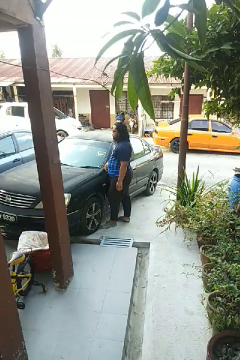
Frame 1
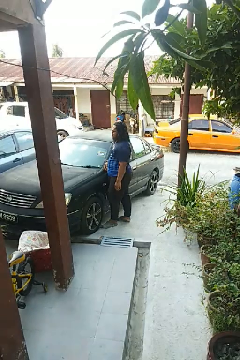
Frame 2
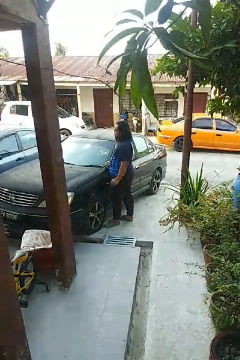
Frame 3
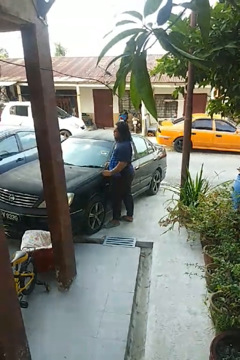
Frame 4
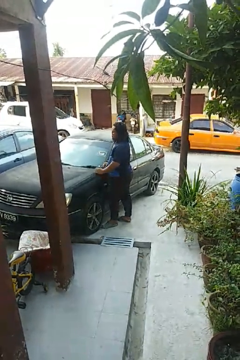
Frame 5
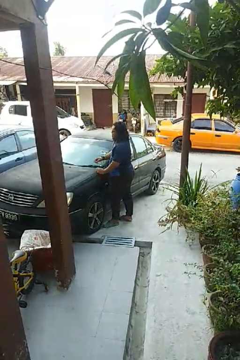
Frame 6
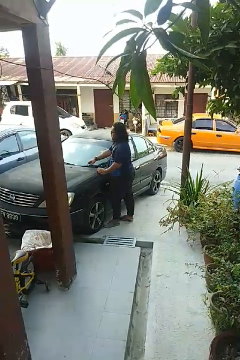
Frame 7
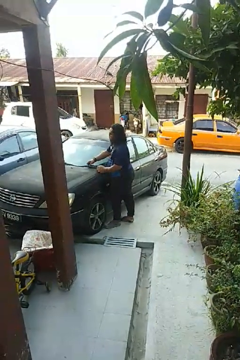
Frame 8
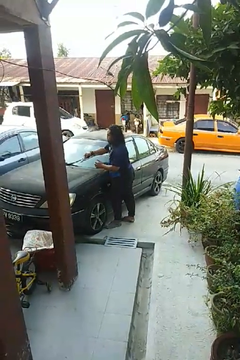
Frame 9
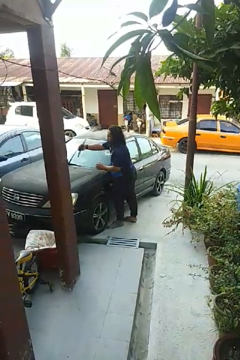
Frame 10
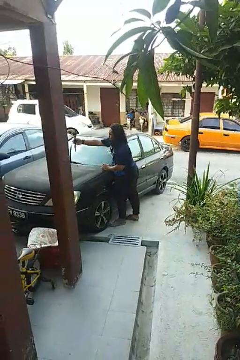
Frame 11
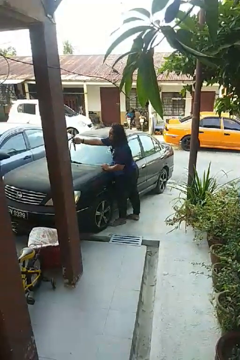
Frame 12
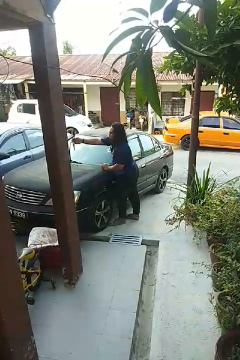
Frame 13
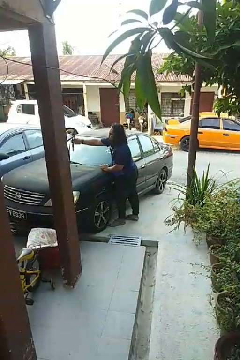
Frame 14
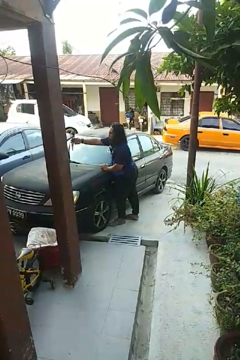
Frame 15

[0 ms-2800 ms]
person flips up car wipers

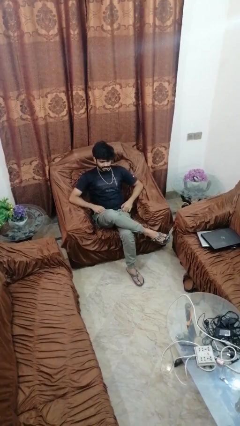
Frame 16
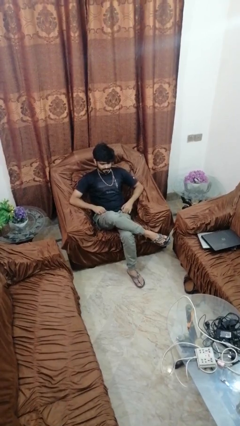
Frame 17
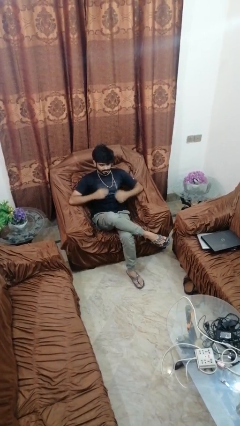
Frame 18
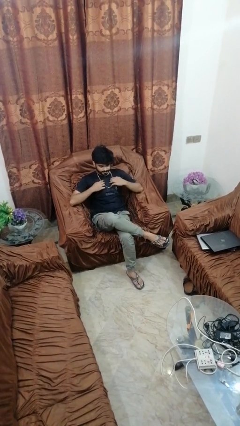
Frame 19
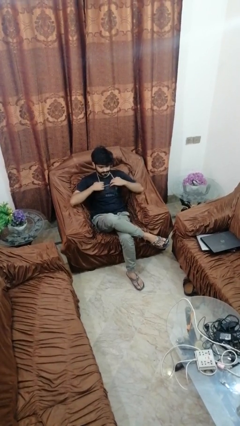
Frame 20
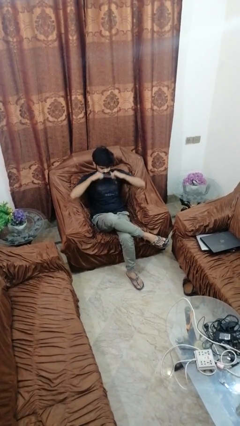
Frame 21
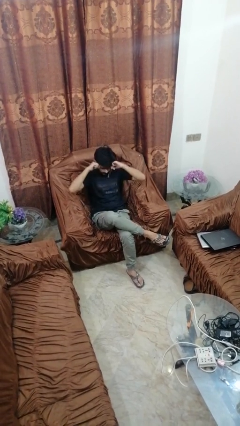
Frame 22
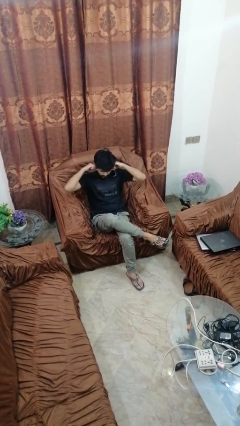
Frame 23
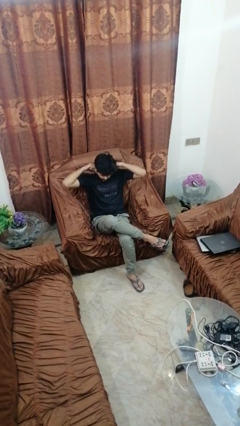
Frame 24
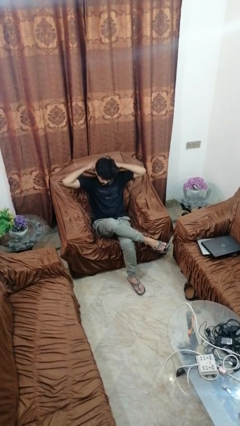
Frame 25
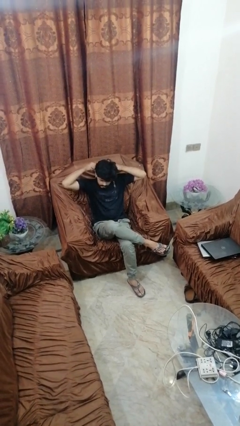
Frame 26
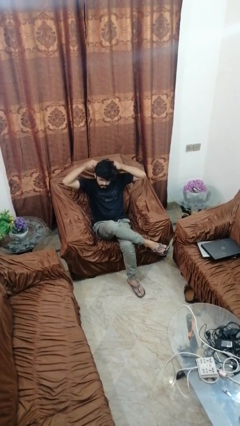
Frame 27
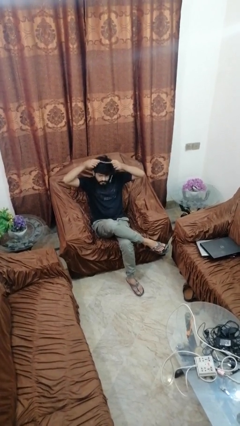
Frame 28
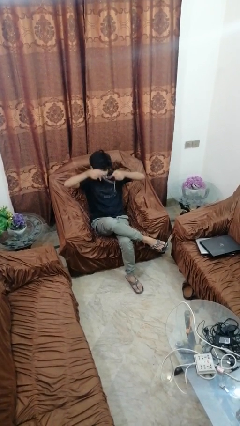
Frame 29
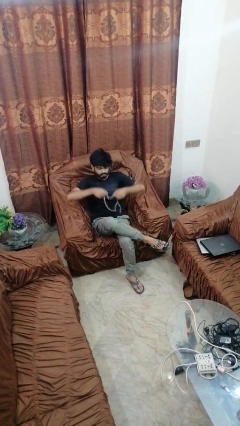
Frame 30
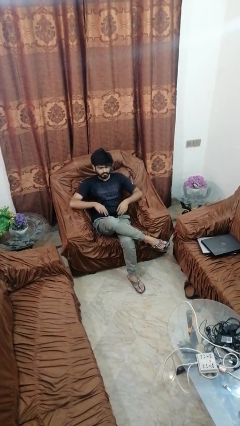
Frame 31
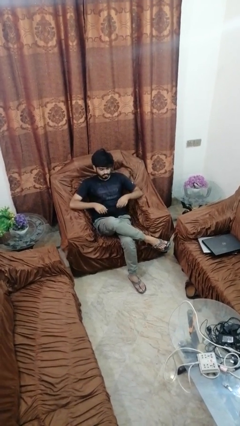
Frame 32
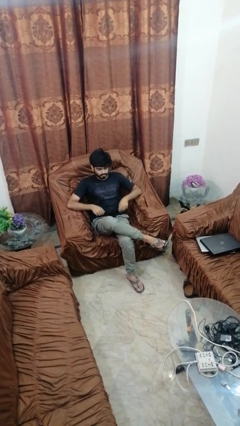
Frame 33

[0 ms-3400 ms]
person takes off necklace

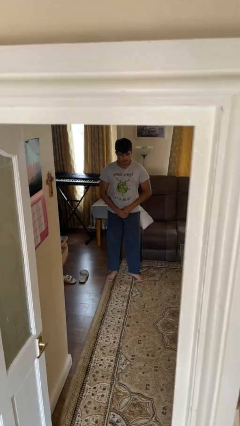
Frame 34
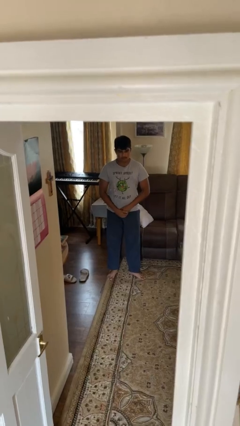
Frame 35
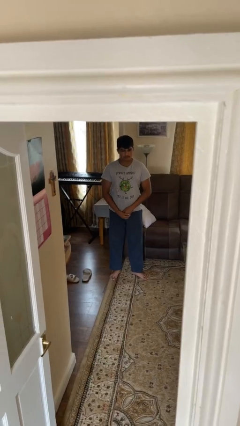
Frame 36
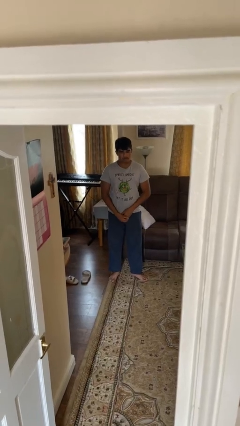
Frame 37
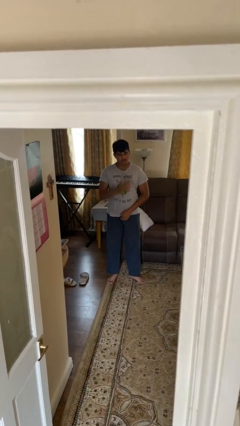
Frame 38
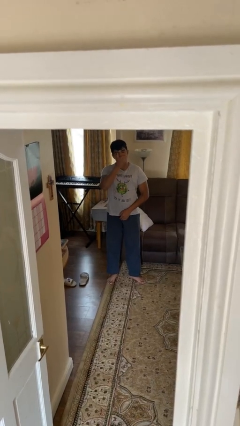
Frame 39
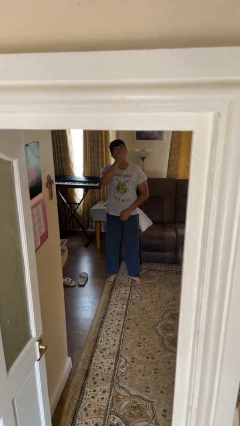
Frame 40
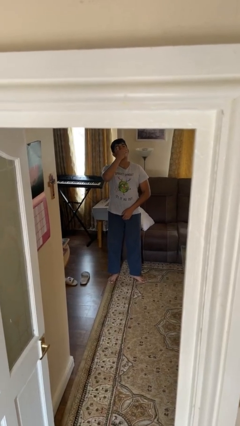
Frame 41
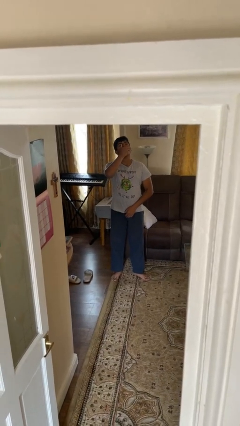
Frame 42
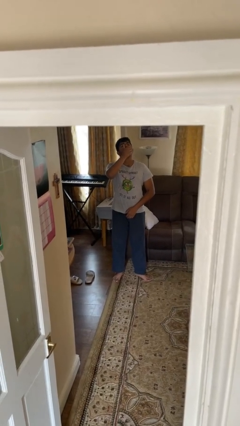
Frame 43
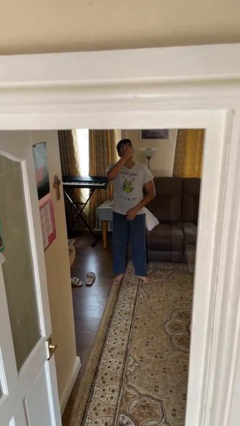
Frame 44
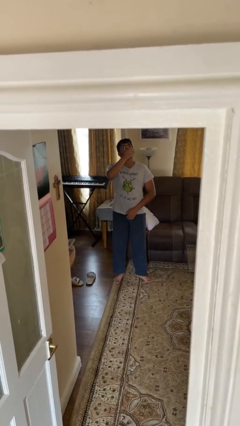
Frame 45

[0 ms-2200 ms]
person yawns

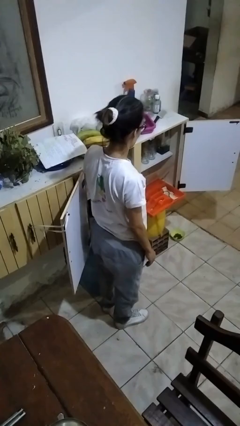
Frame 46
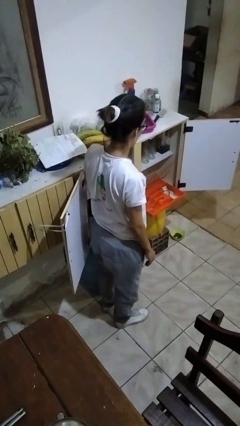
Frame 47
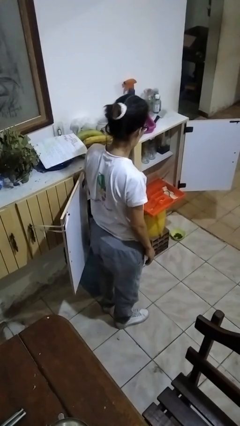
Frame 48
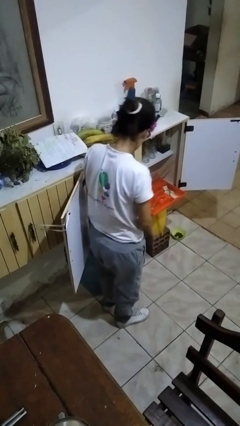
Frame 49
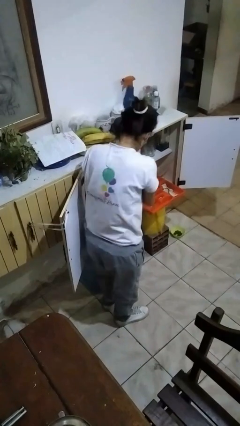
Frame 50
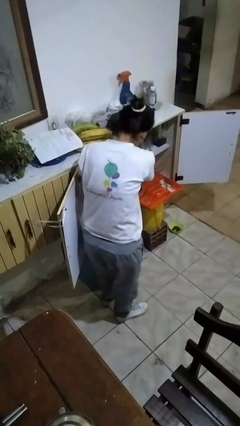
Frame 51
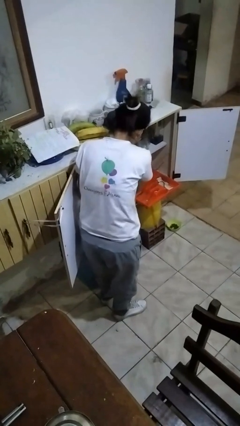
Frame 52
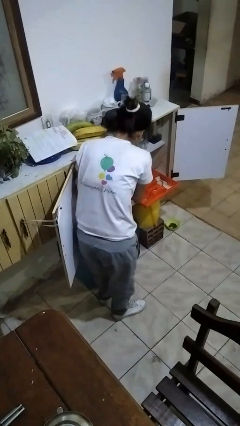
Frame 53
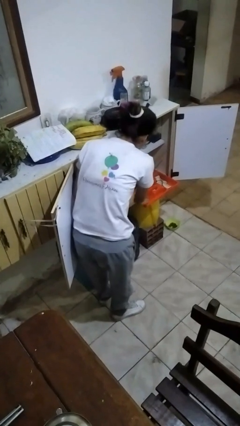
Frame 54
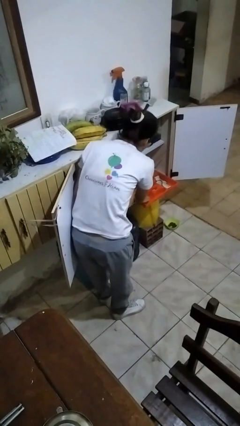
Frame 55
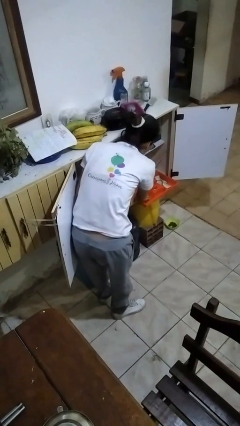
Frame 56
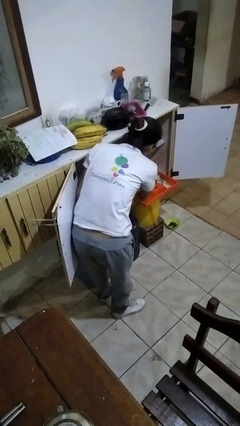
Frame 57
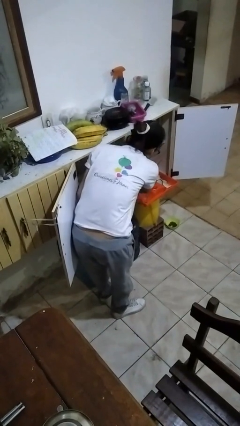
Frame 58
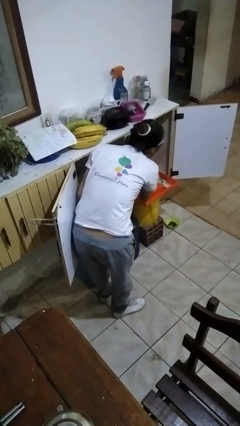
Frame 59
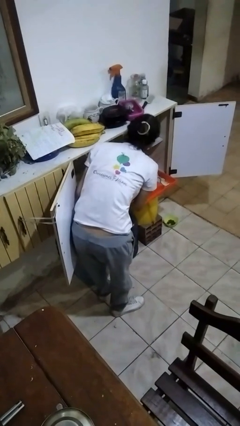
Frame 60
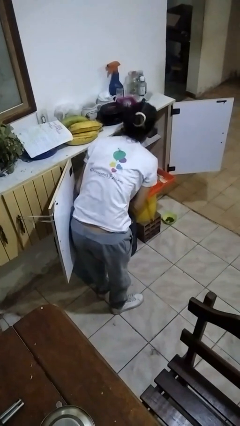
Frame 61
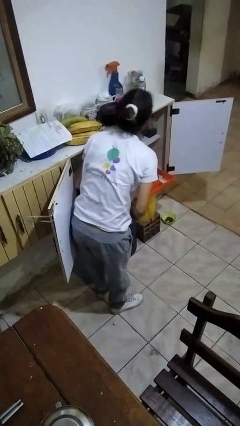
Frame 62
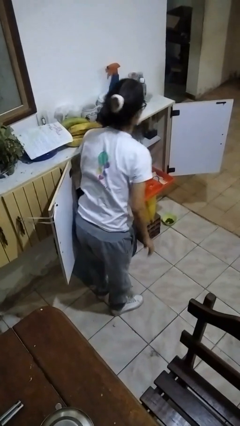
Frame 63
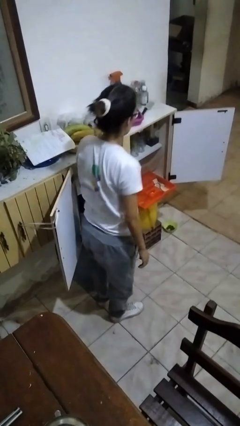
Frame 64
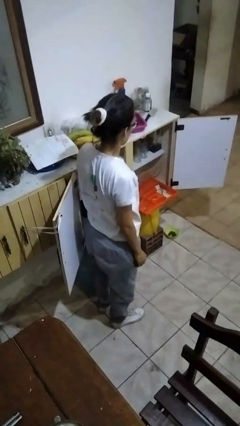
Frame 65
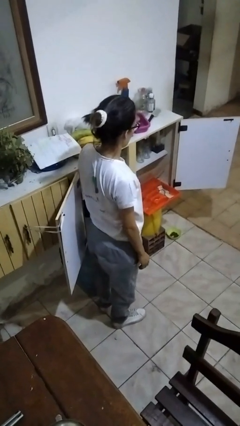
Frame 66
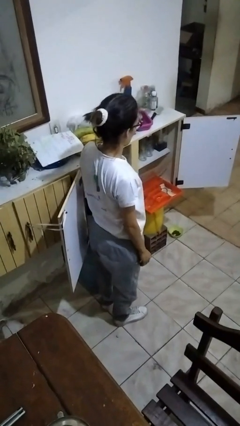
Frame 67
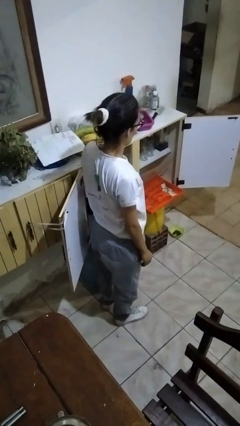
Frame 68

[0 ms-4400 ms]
person searches in kitchen drawer

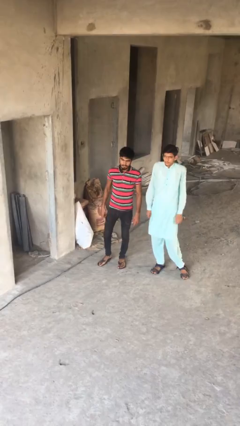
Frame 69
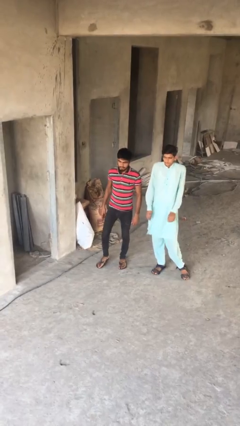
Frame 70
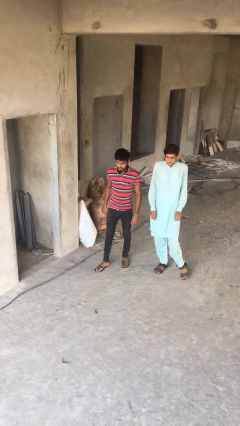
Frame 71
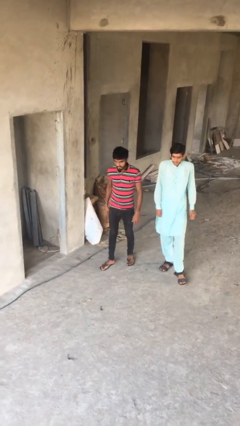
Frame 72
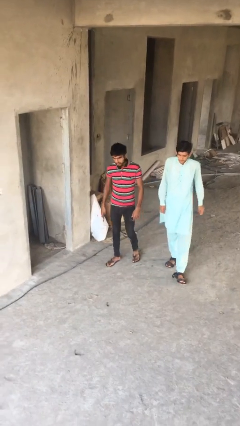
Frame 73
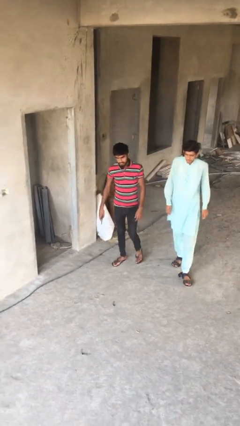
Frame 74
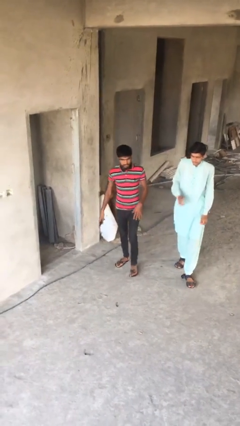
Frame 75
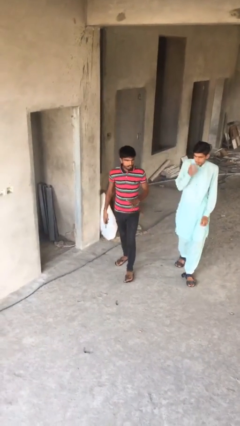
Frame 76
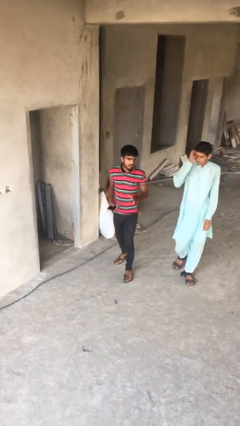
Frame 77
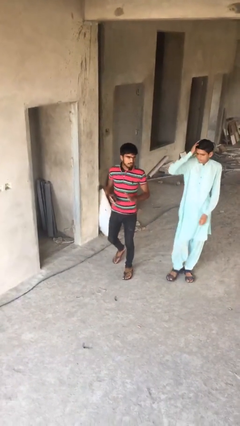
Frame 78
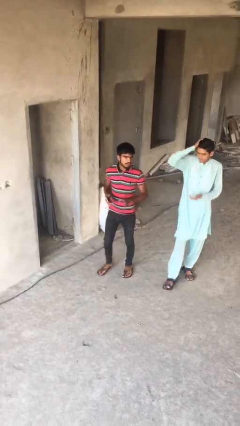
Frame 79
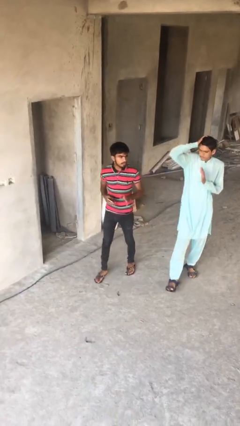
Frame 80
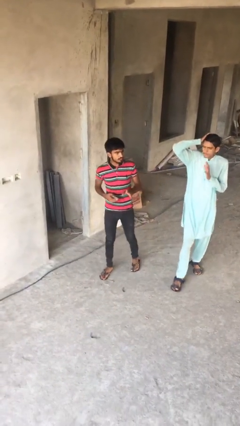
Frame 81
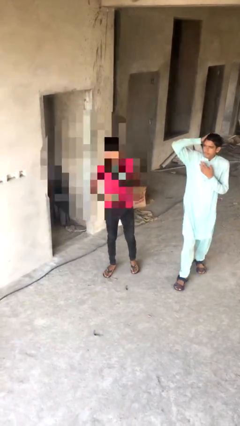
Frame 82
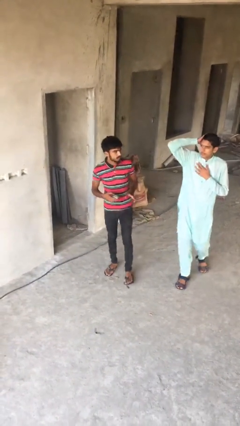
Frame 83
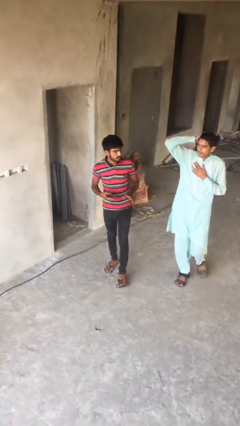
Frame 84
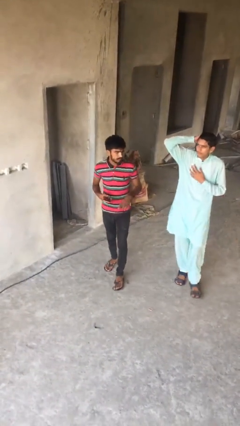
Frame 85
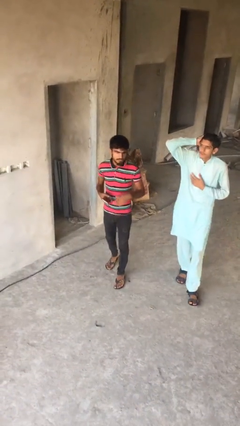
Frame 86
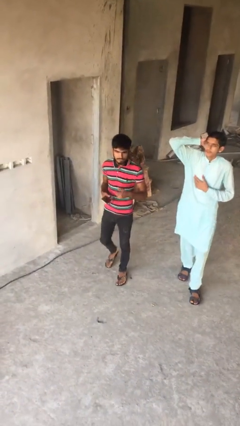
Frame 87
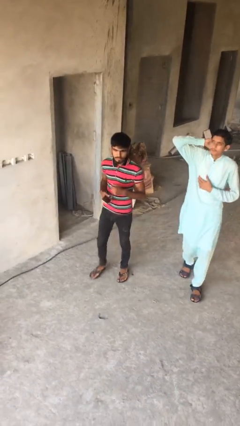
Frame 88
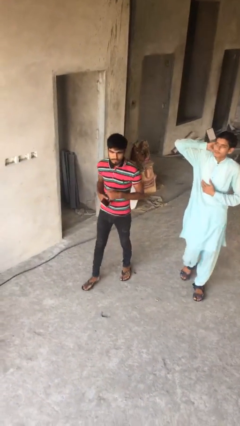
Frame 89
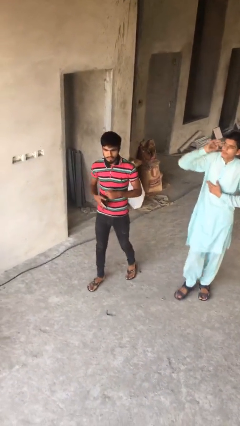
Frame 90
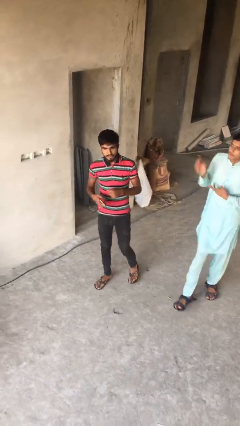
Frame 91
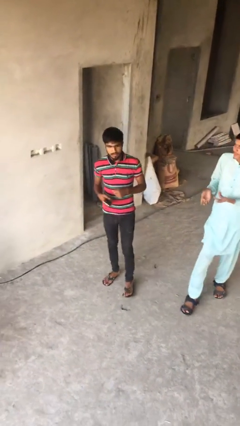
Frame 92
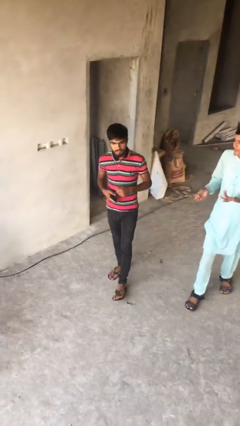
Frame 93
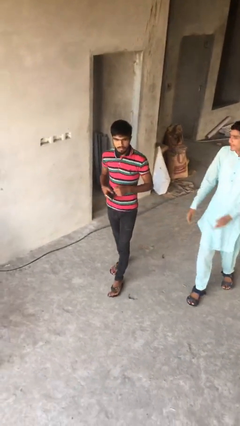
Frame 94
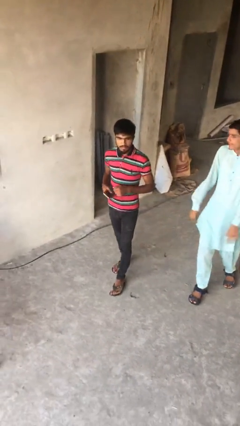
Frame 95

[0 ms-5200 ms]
person talks to person

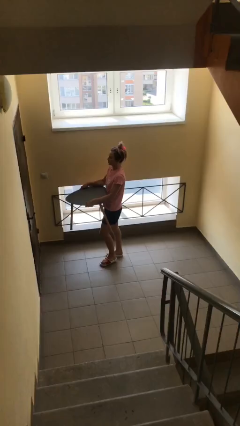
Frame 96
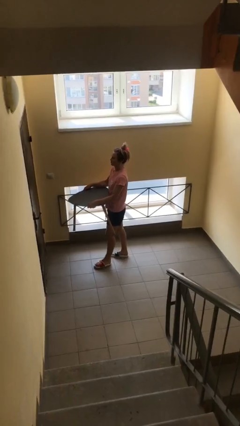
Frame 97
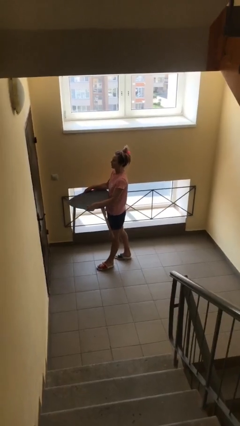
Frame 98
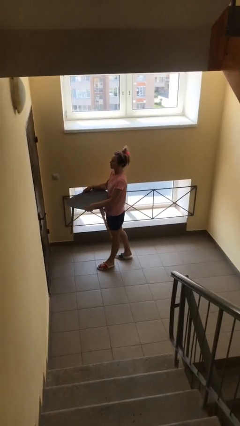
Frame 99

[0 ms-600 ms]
person carries furniture
